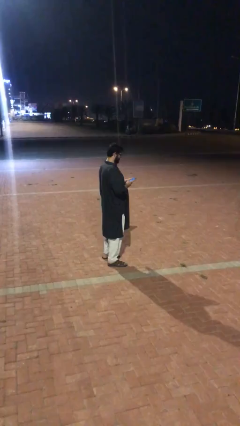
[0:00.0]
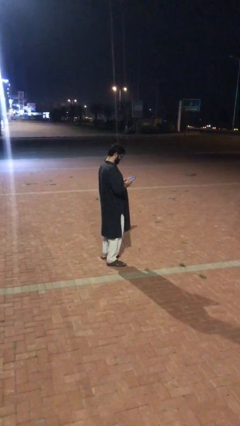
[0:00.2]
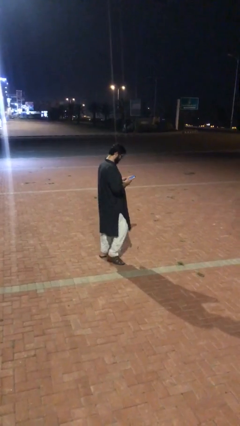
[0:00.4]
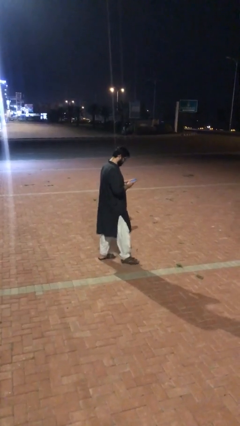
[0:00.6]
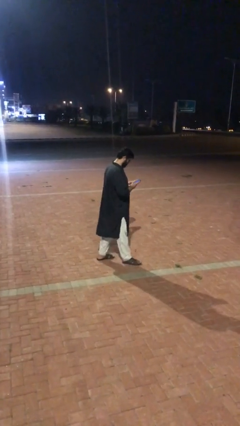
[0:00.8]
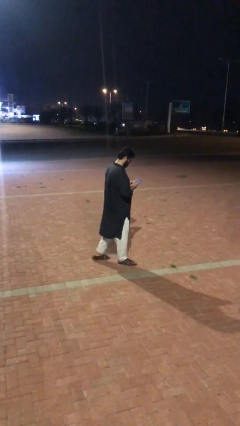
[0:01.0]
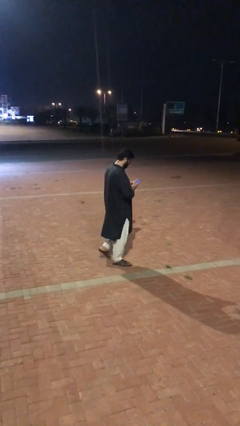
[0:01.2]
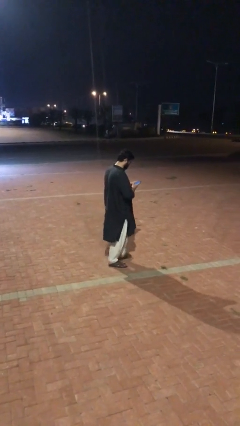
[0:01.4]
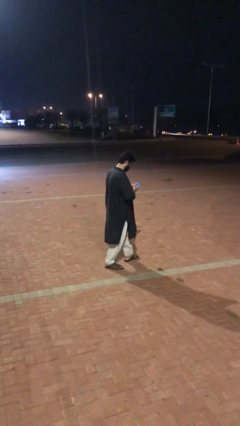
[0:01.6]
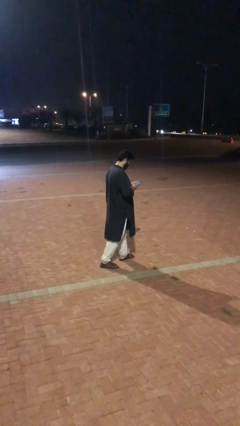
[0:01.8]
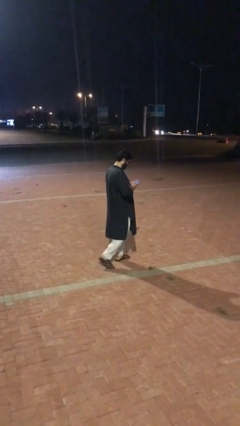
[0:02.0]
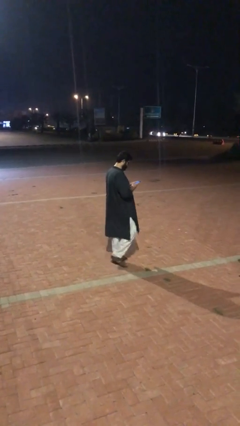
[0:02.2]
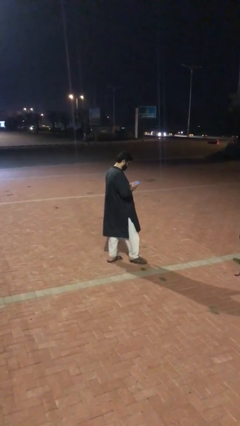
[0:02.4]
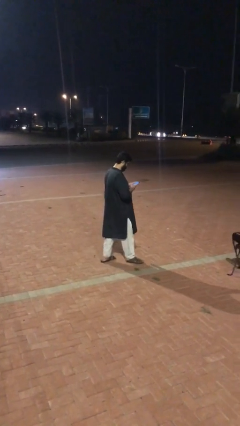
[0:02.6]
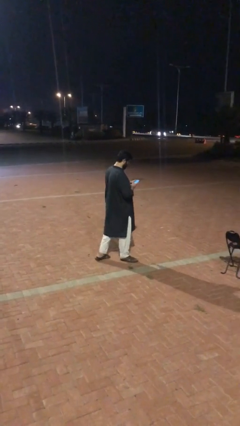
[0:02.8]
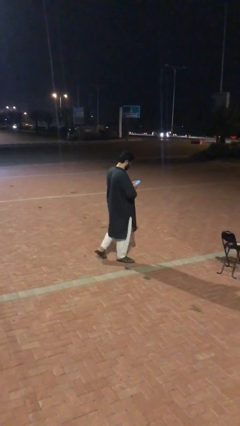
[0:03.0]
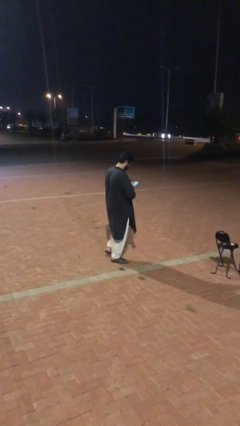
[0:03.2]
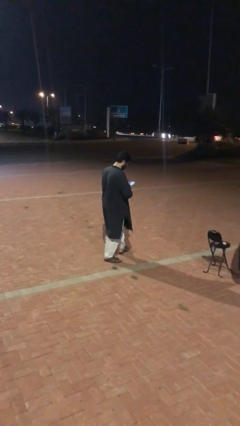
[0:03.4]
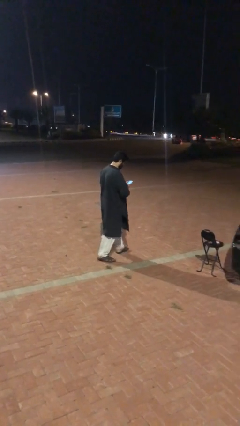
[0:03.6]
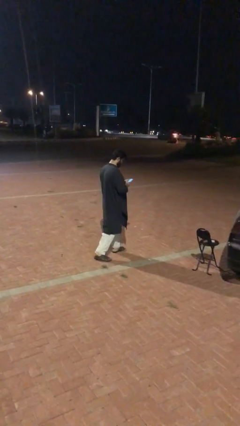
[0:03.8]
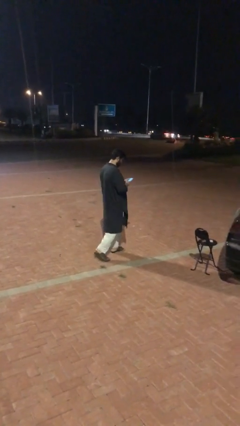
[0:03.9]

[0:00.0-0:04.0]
person texts on phone

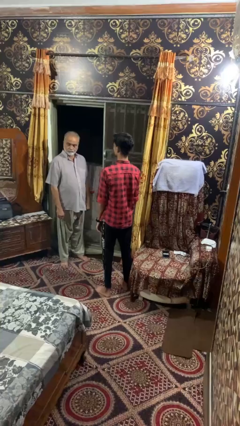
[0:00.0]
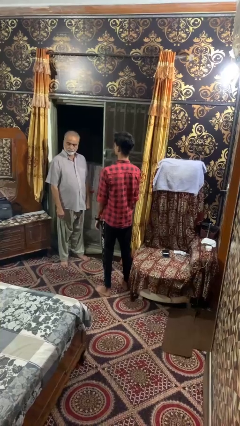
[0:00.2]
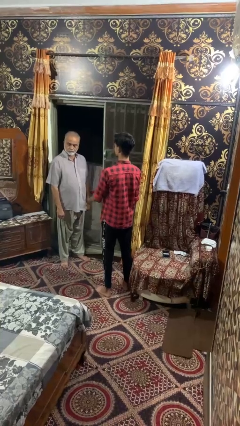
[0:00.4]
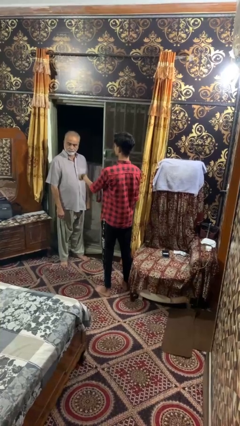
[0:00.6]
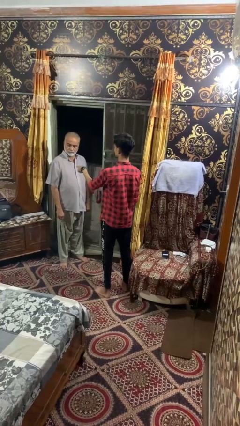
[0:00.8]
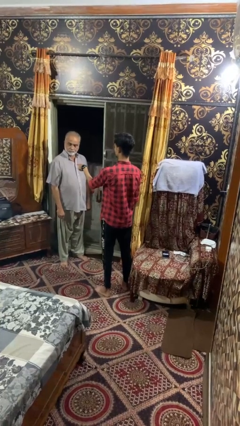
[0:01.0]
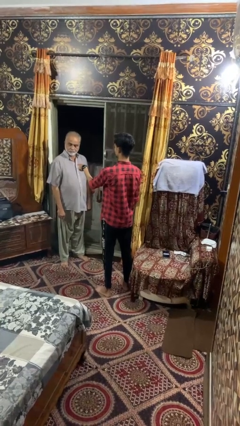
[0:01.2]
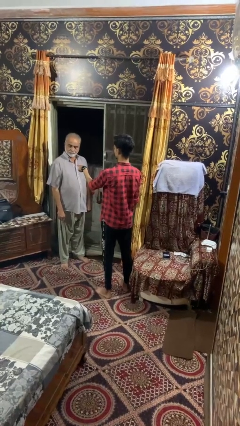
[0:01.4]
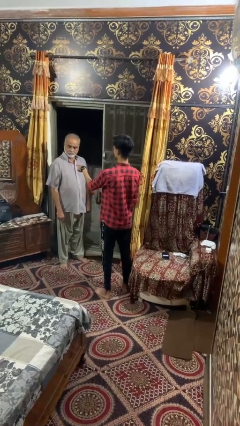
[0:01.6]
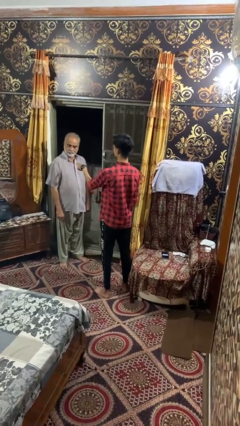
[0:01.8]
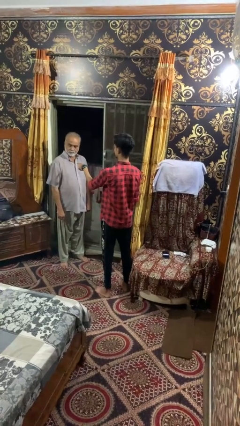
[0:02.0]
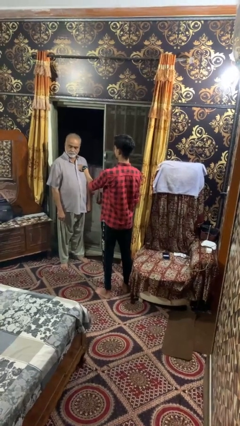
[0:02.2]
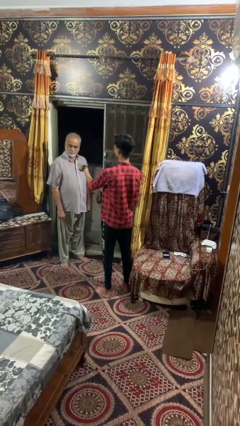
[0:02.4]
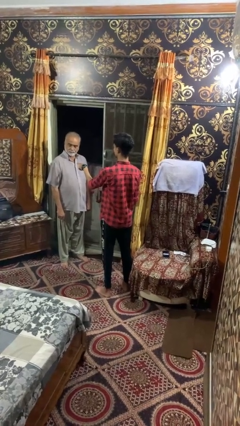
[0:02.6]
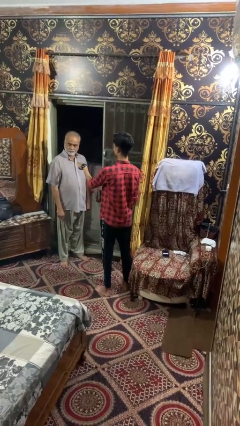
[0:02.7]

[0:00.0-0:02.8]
person points at person

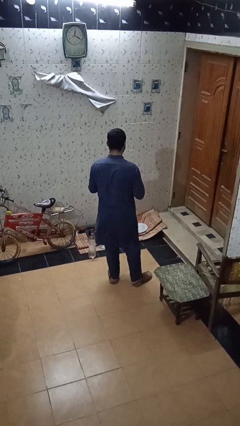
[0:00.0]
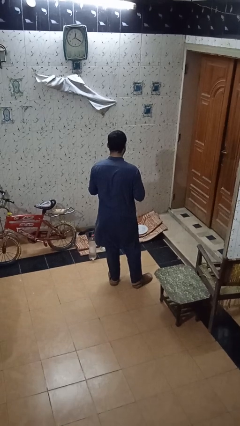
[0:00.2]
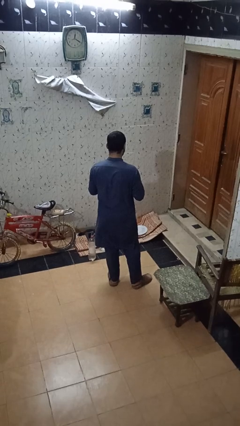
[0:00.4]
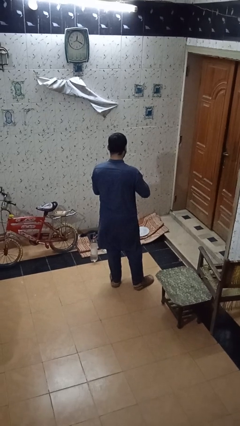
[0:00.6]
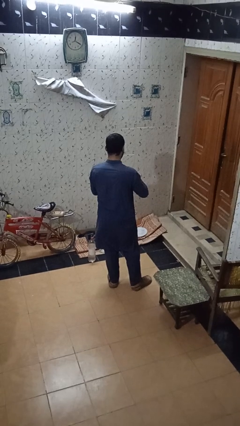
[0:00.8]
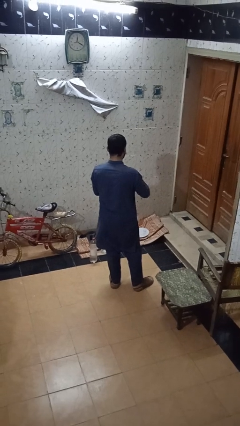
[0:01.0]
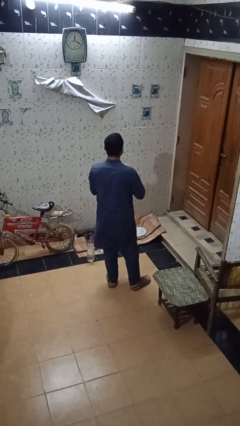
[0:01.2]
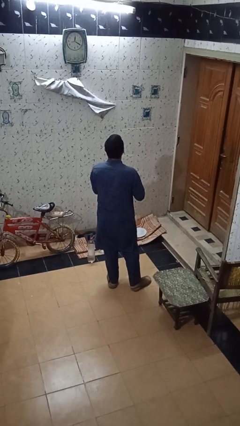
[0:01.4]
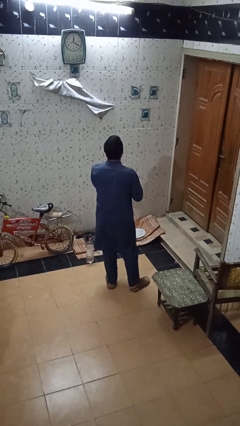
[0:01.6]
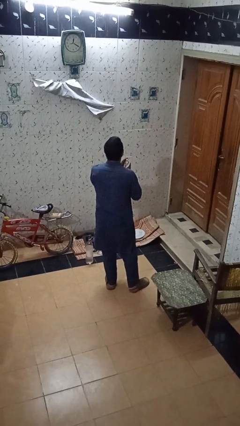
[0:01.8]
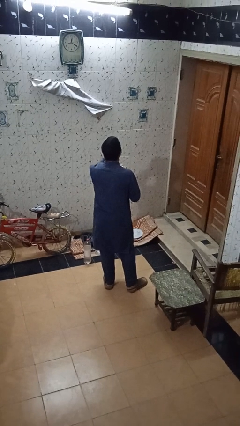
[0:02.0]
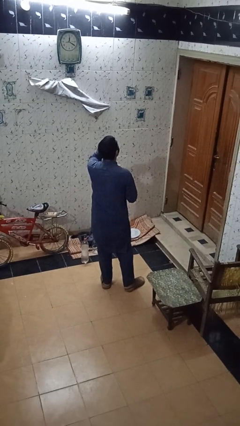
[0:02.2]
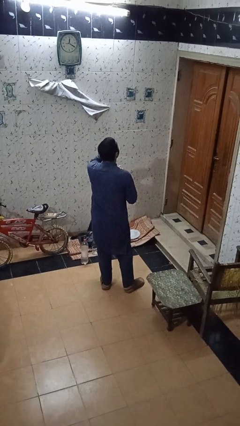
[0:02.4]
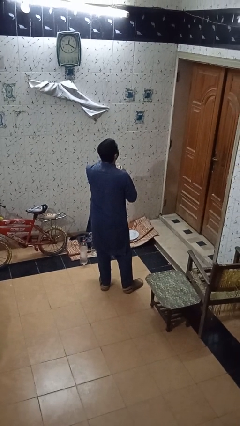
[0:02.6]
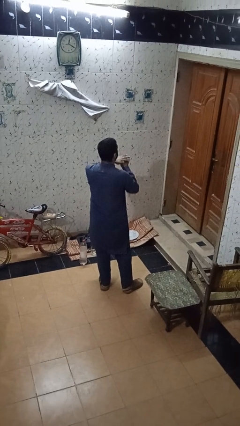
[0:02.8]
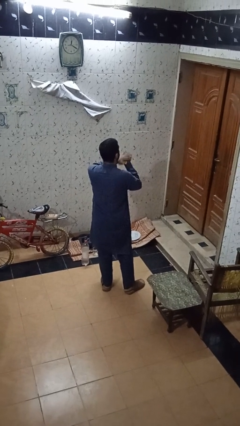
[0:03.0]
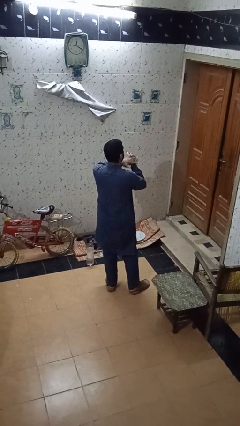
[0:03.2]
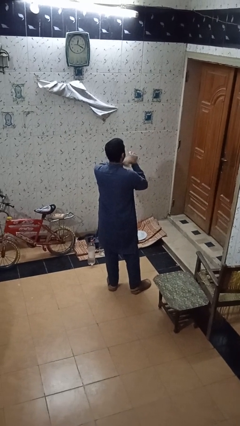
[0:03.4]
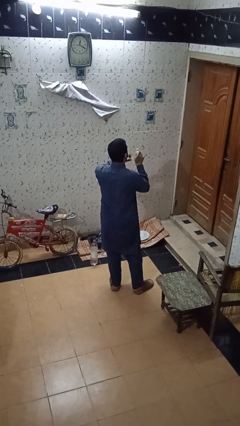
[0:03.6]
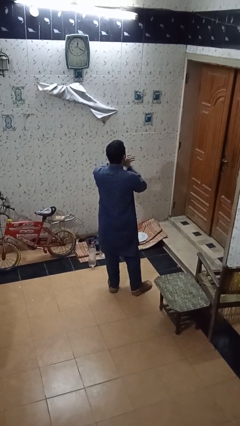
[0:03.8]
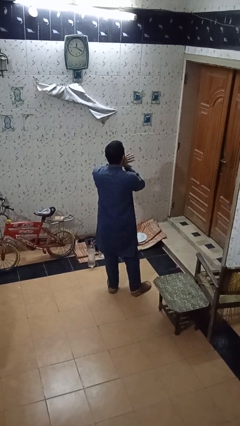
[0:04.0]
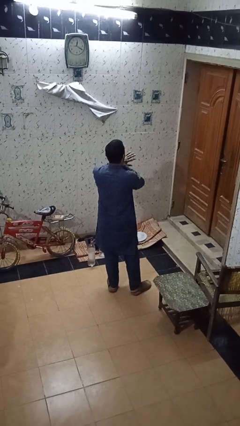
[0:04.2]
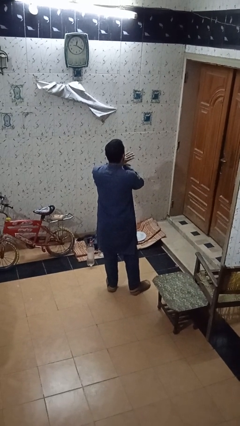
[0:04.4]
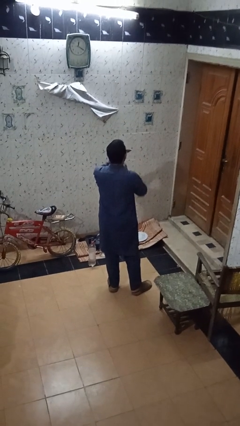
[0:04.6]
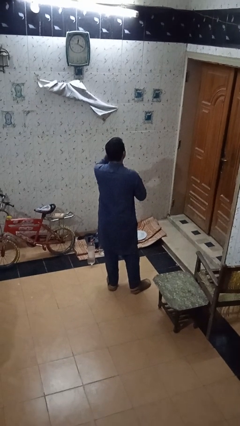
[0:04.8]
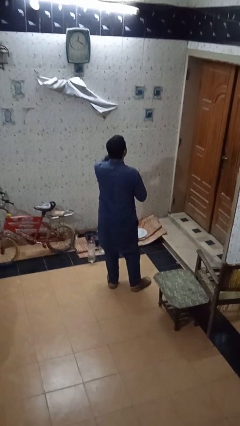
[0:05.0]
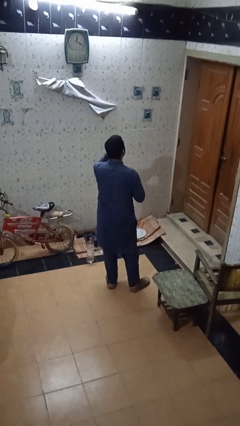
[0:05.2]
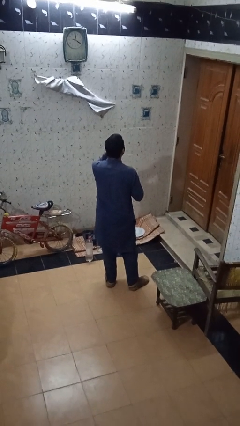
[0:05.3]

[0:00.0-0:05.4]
person applies sunscreen

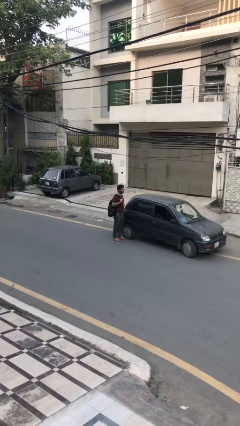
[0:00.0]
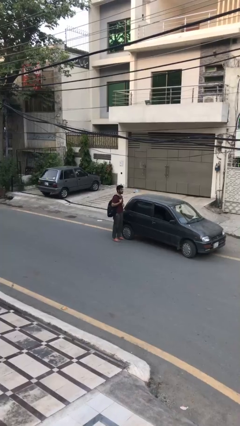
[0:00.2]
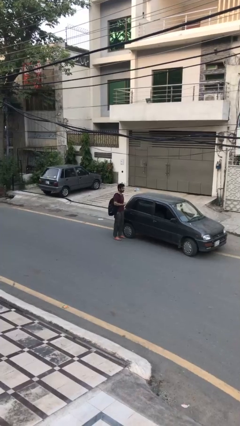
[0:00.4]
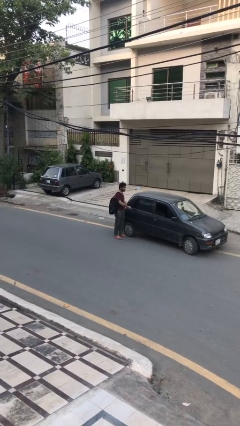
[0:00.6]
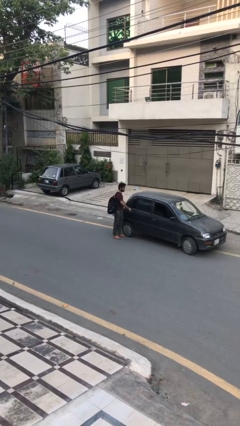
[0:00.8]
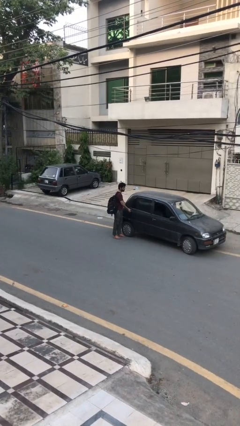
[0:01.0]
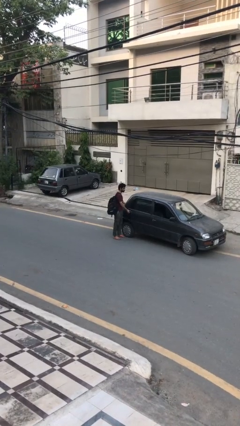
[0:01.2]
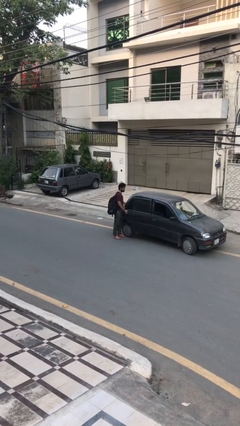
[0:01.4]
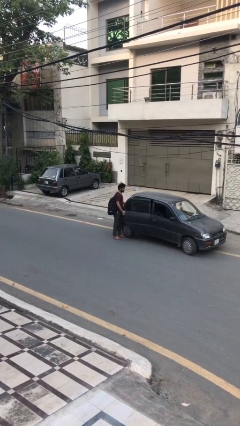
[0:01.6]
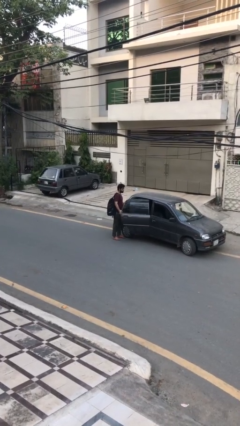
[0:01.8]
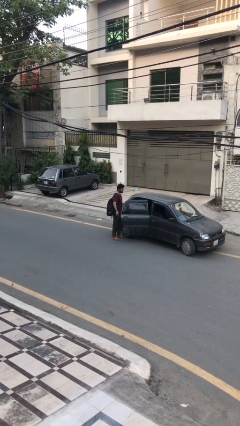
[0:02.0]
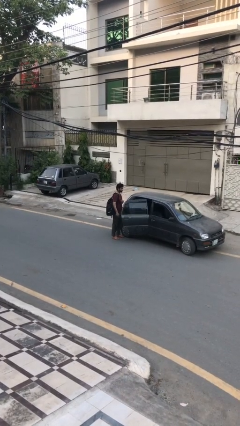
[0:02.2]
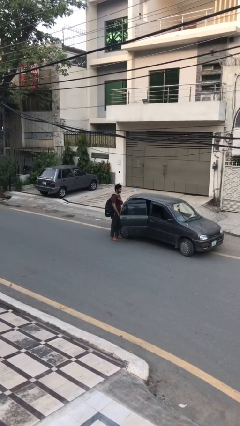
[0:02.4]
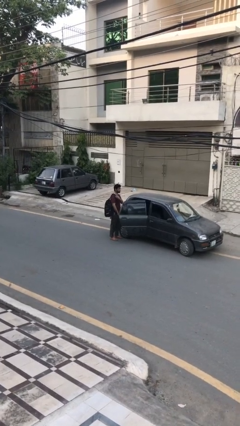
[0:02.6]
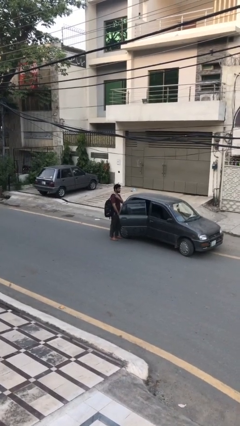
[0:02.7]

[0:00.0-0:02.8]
person opens car door

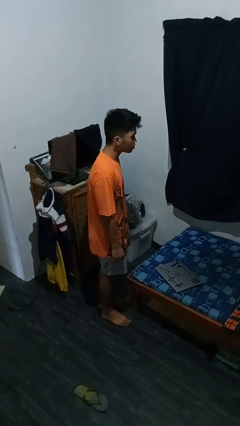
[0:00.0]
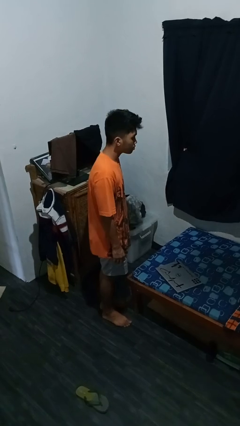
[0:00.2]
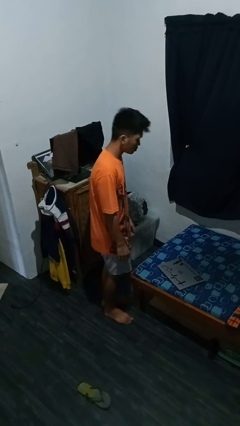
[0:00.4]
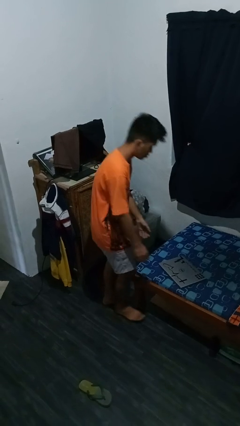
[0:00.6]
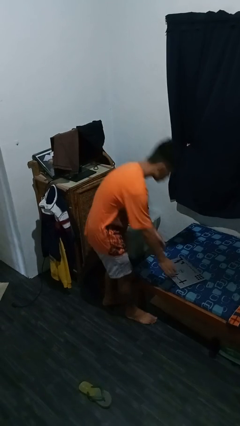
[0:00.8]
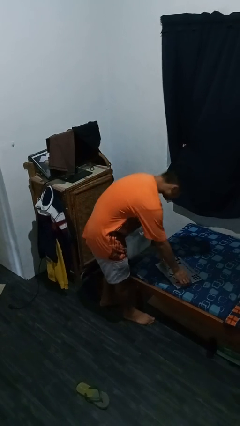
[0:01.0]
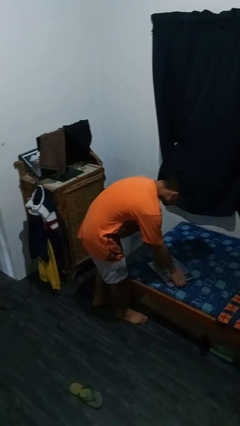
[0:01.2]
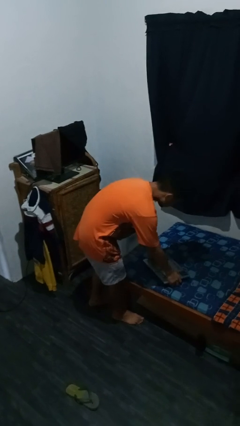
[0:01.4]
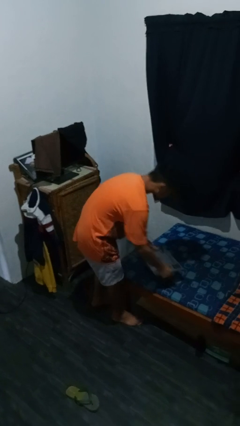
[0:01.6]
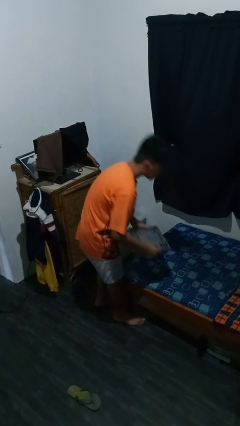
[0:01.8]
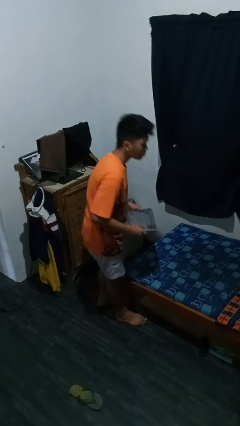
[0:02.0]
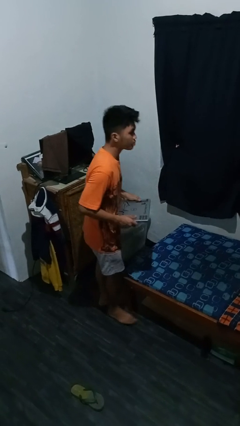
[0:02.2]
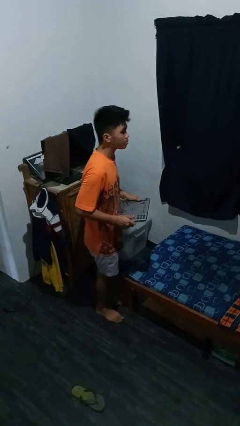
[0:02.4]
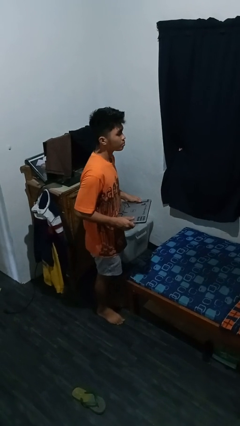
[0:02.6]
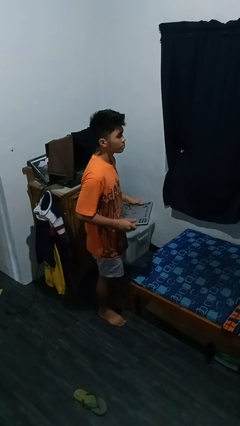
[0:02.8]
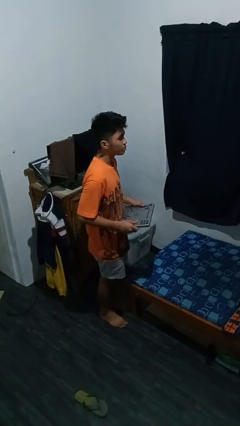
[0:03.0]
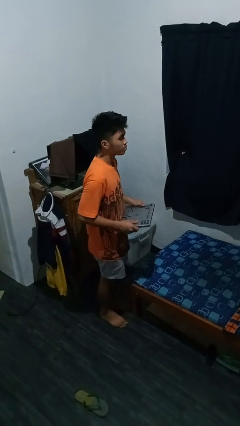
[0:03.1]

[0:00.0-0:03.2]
person picks up object from bed
